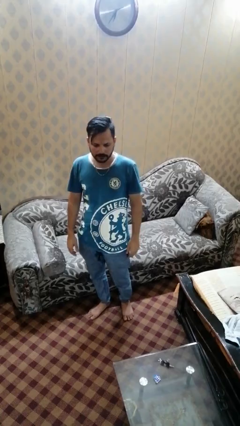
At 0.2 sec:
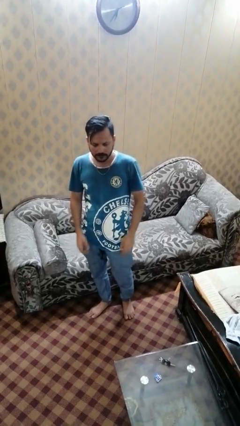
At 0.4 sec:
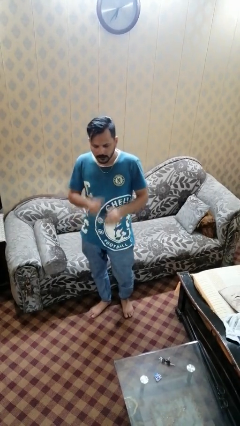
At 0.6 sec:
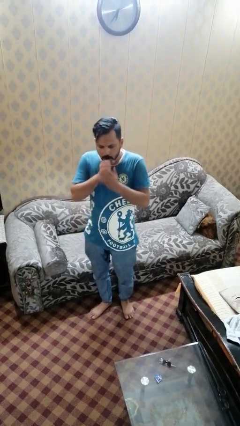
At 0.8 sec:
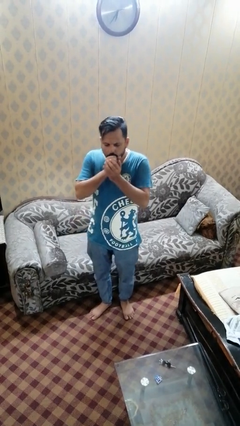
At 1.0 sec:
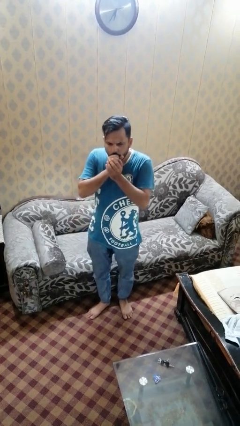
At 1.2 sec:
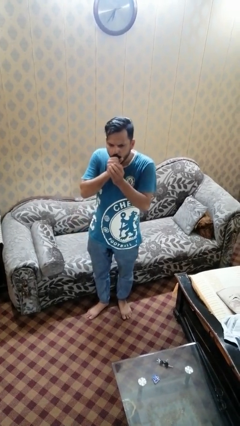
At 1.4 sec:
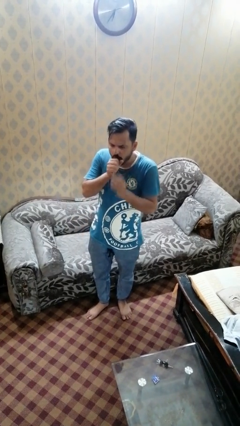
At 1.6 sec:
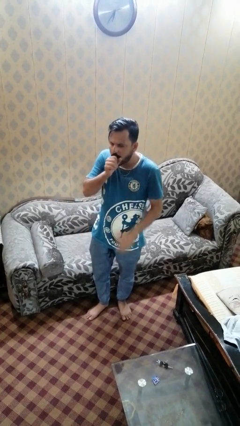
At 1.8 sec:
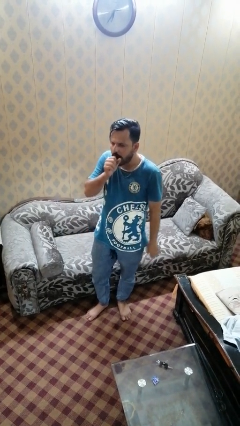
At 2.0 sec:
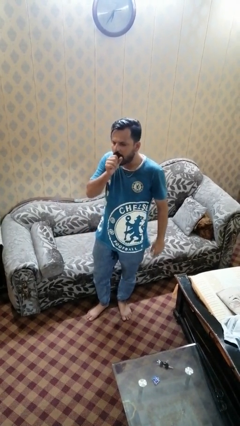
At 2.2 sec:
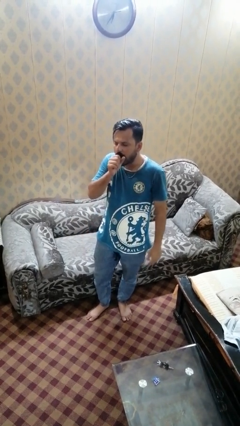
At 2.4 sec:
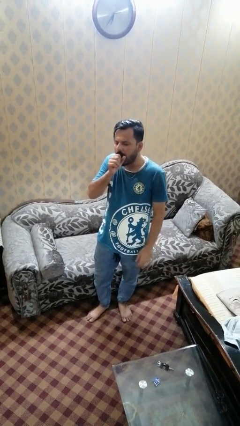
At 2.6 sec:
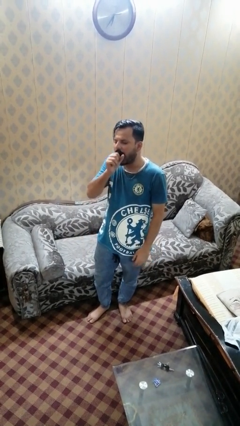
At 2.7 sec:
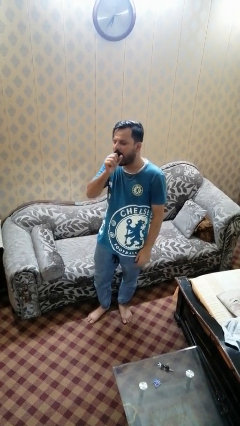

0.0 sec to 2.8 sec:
person yawns

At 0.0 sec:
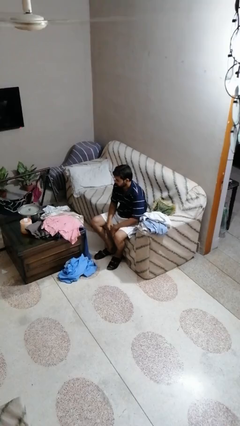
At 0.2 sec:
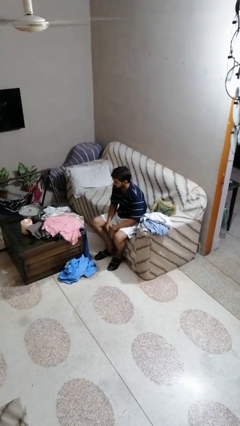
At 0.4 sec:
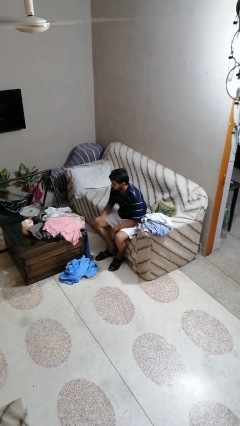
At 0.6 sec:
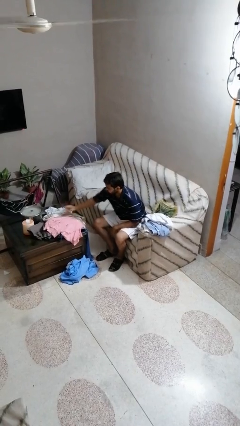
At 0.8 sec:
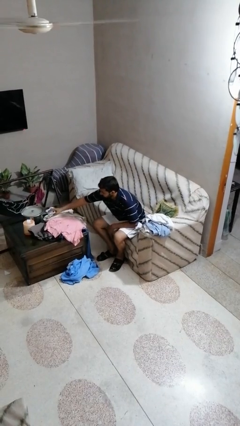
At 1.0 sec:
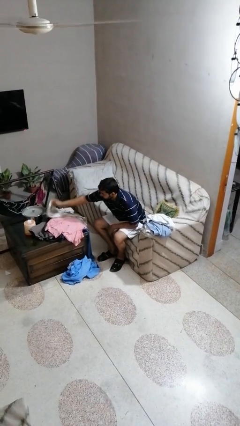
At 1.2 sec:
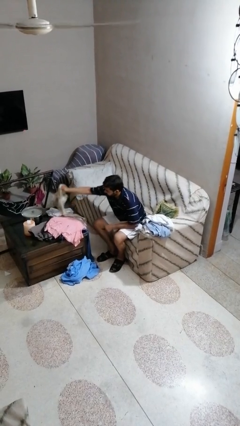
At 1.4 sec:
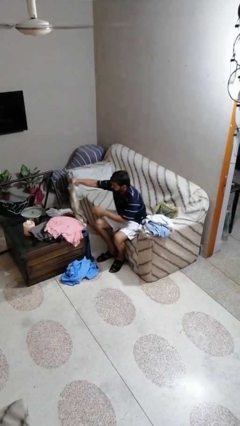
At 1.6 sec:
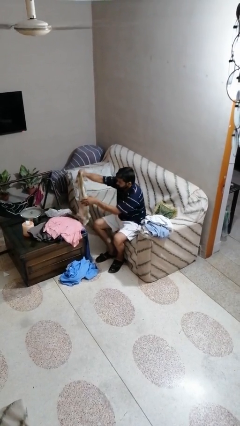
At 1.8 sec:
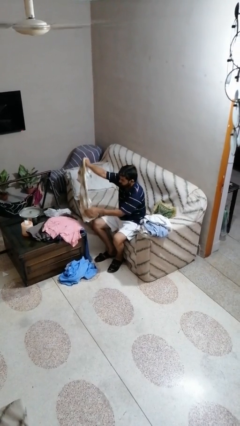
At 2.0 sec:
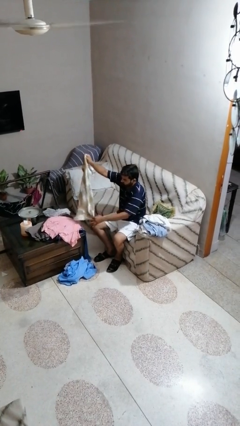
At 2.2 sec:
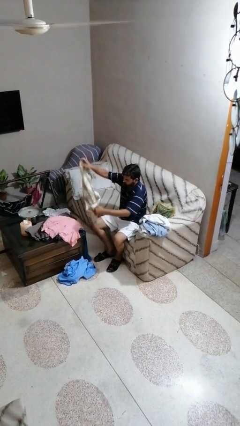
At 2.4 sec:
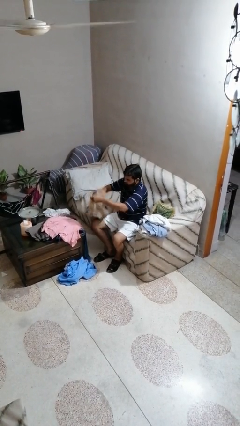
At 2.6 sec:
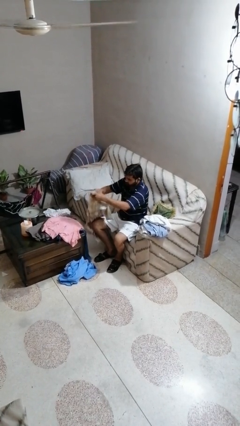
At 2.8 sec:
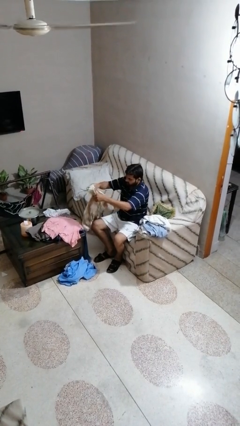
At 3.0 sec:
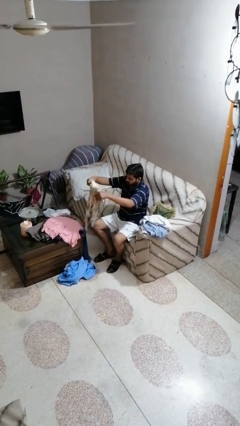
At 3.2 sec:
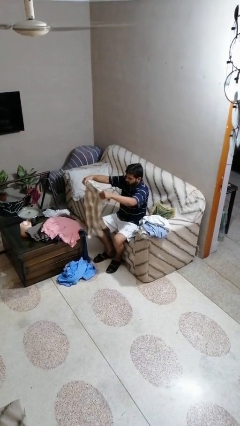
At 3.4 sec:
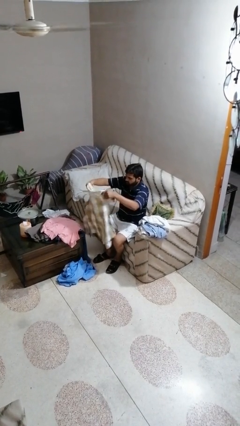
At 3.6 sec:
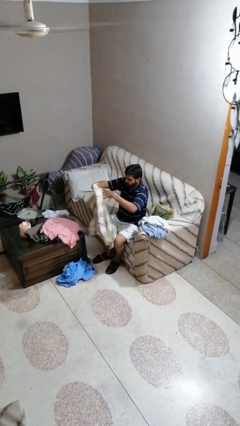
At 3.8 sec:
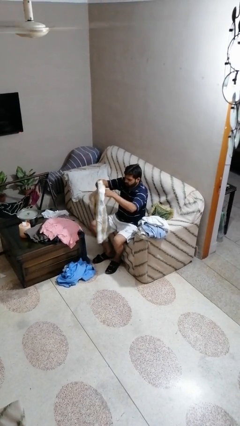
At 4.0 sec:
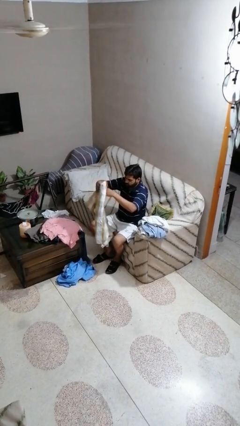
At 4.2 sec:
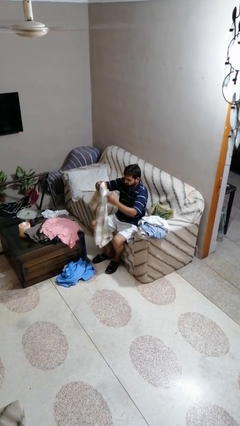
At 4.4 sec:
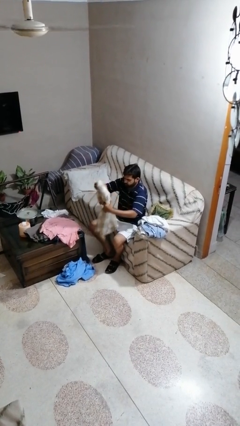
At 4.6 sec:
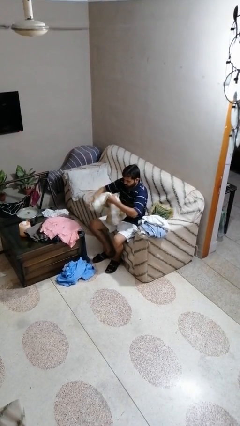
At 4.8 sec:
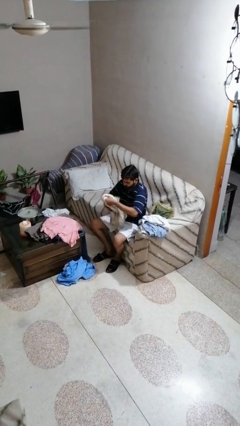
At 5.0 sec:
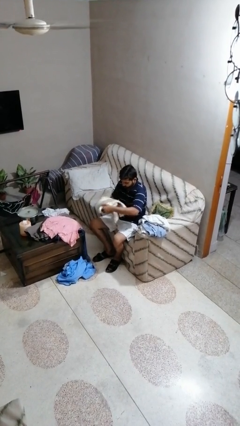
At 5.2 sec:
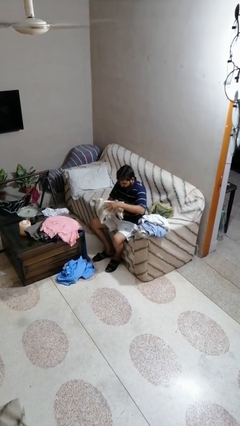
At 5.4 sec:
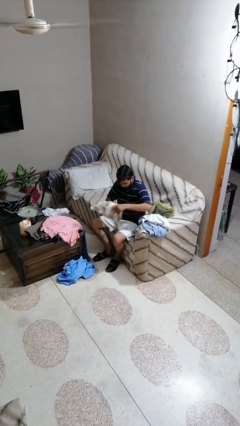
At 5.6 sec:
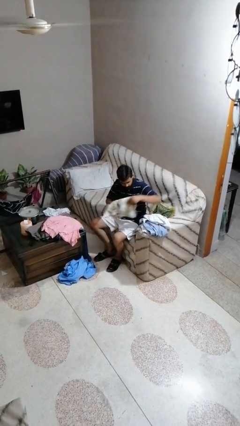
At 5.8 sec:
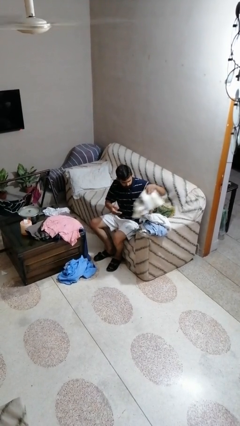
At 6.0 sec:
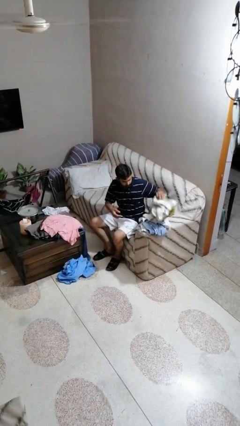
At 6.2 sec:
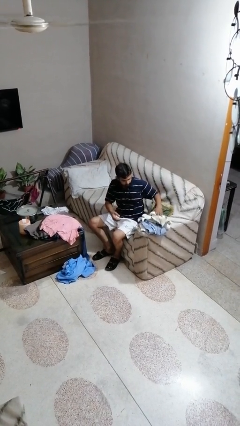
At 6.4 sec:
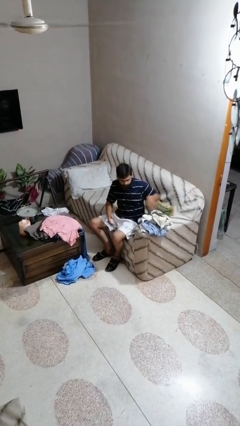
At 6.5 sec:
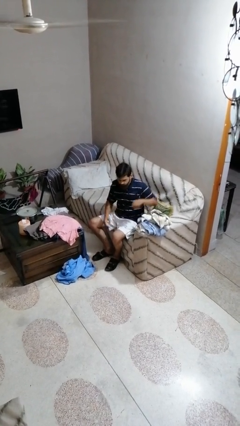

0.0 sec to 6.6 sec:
person folds shirt

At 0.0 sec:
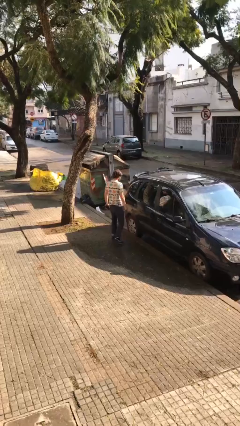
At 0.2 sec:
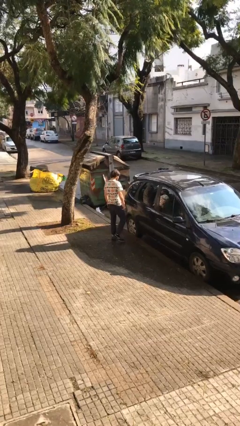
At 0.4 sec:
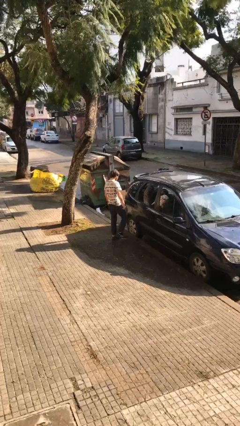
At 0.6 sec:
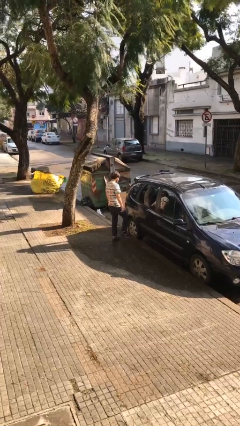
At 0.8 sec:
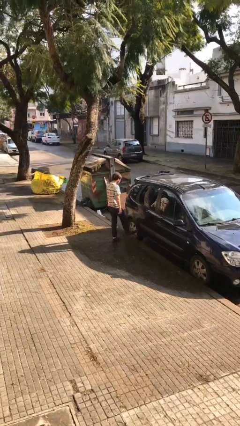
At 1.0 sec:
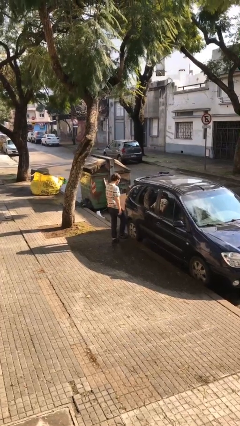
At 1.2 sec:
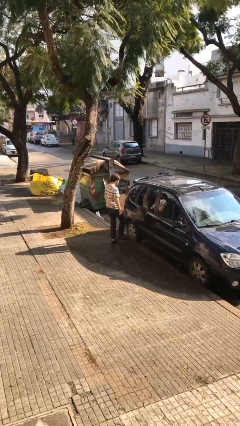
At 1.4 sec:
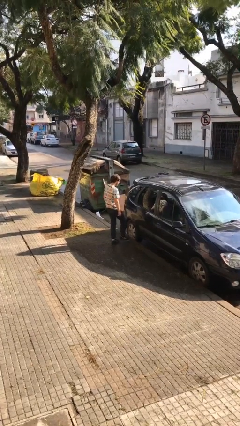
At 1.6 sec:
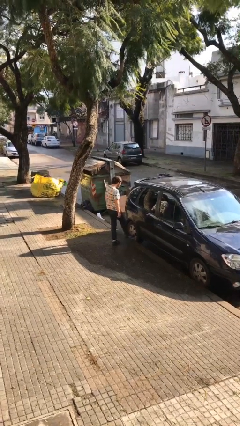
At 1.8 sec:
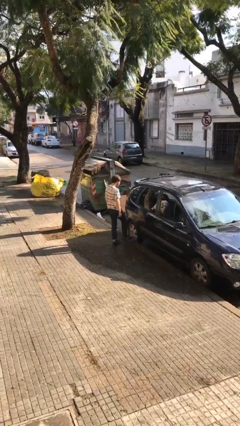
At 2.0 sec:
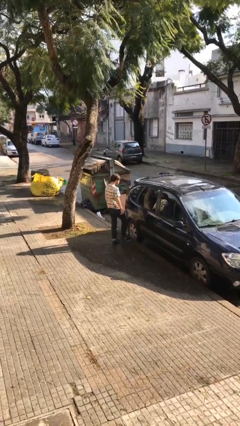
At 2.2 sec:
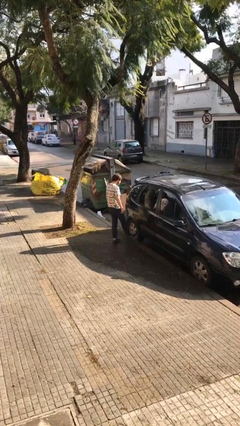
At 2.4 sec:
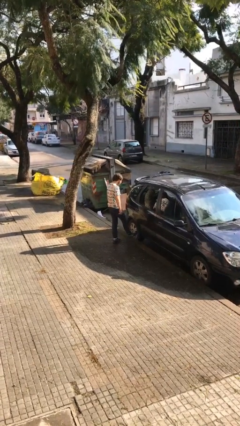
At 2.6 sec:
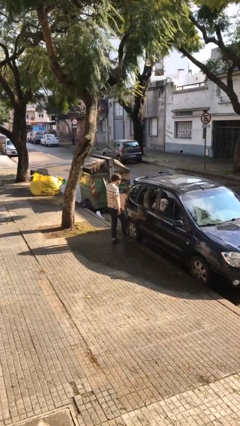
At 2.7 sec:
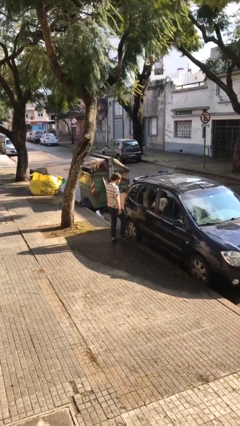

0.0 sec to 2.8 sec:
person kicks car tires

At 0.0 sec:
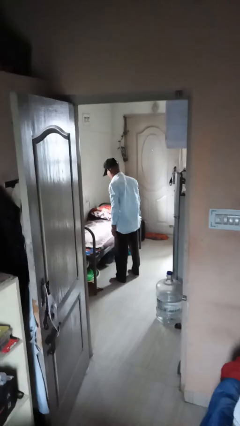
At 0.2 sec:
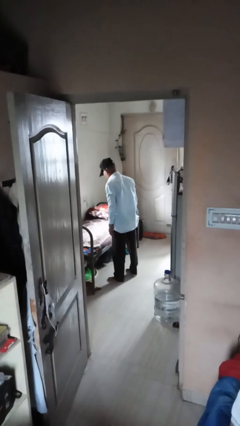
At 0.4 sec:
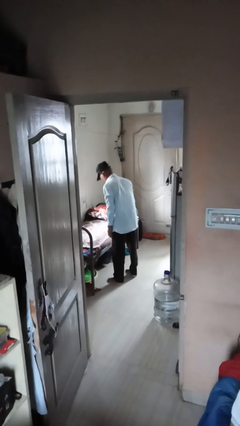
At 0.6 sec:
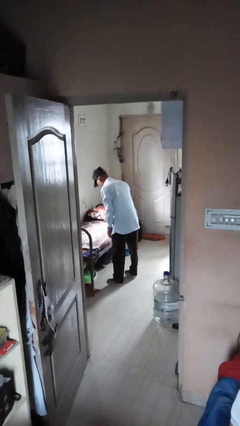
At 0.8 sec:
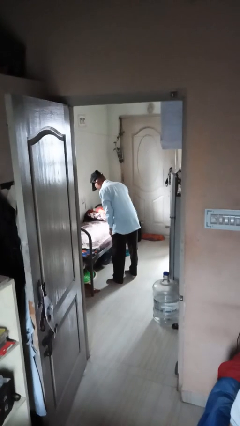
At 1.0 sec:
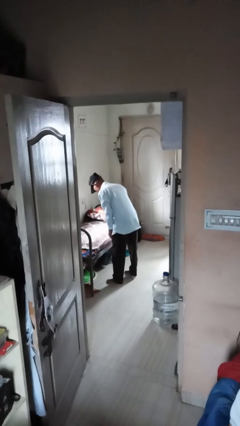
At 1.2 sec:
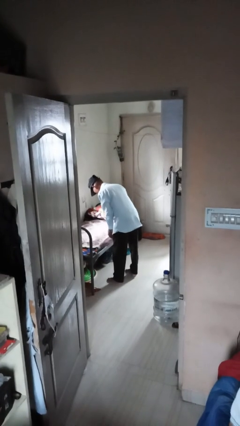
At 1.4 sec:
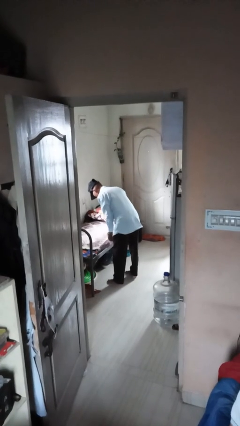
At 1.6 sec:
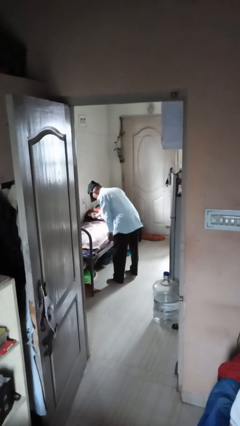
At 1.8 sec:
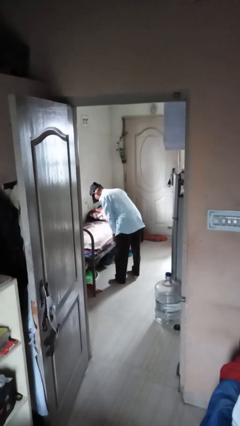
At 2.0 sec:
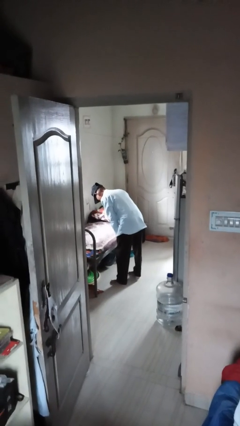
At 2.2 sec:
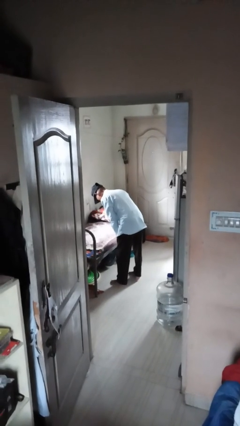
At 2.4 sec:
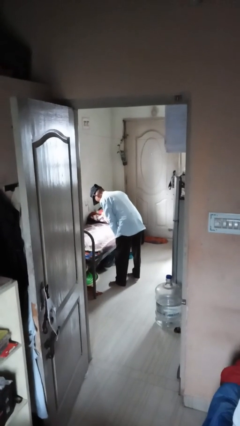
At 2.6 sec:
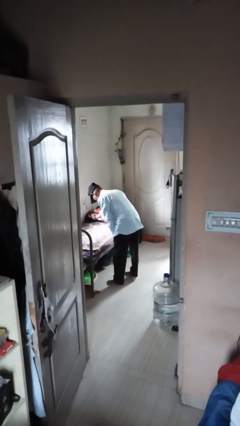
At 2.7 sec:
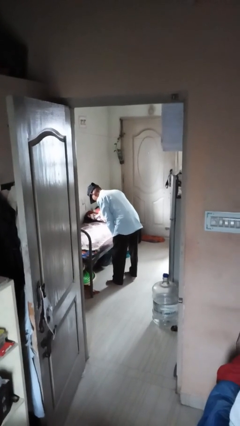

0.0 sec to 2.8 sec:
person makes bed

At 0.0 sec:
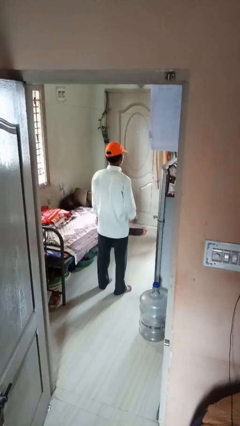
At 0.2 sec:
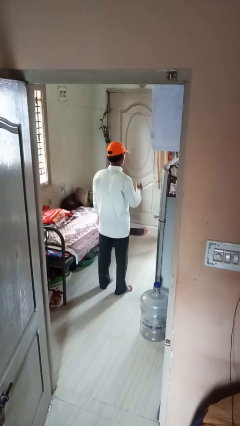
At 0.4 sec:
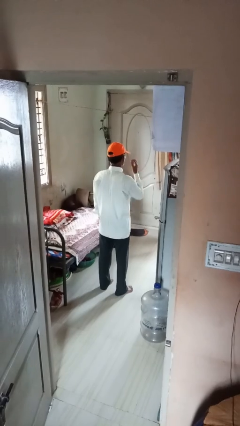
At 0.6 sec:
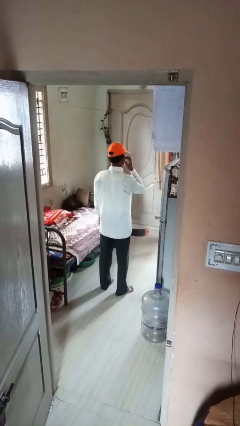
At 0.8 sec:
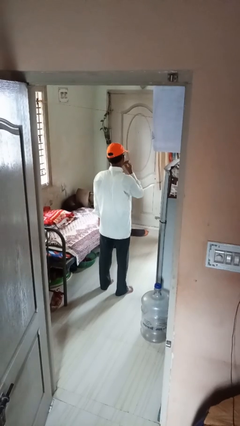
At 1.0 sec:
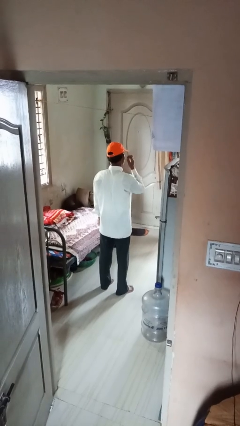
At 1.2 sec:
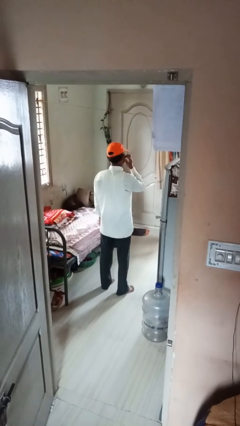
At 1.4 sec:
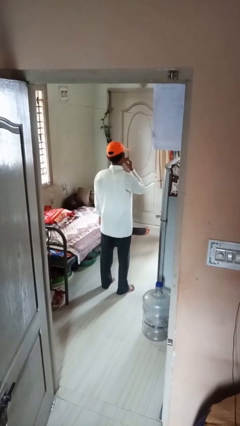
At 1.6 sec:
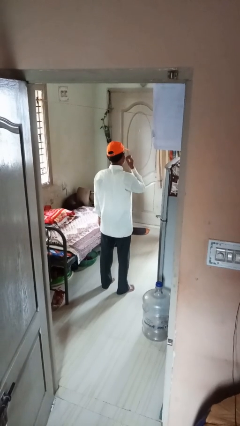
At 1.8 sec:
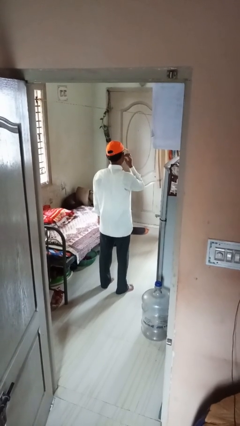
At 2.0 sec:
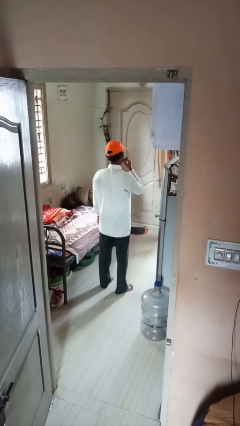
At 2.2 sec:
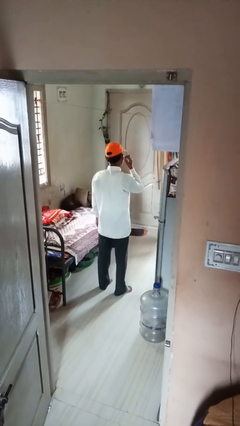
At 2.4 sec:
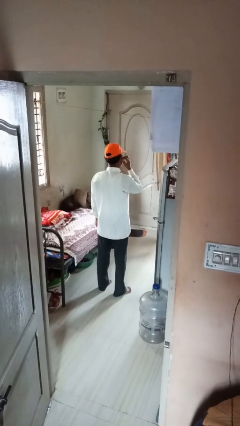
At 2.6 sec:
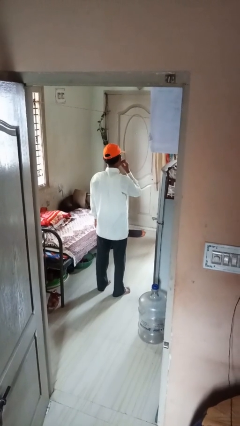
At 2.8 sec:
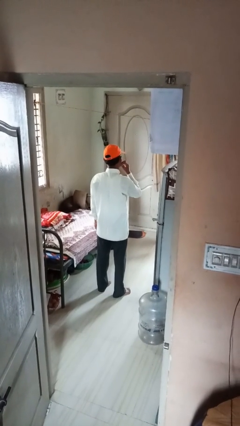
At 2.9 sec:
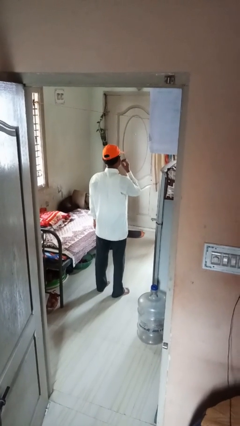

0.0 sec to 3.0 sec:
person scratches face
